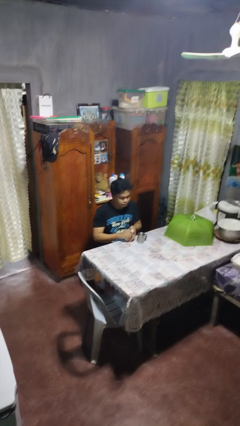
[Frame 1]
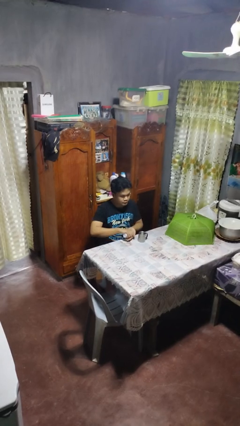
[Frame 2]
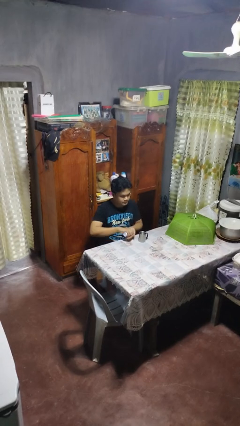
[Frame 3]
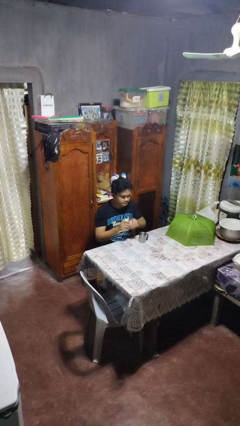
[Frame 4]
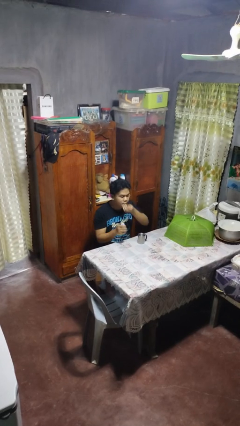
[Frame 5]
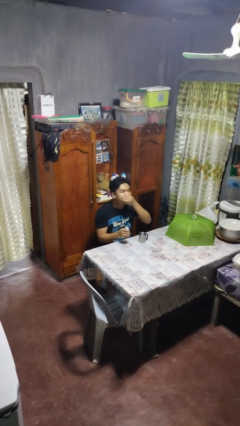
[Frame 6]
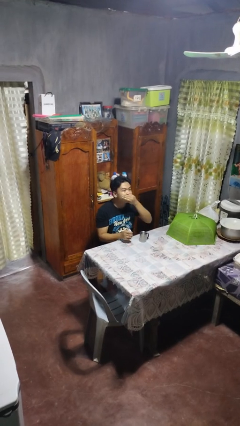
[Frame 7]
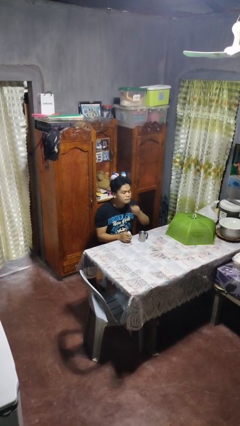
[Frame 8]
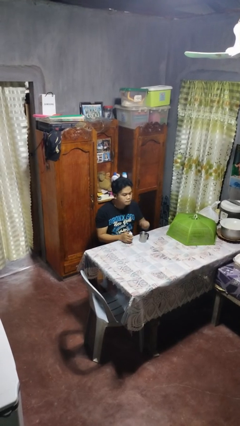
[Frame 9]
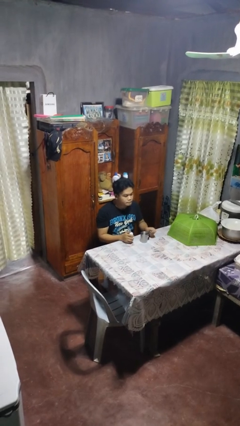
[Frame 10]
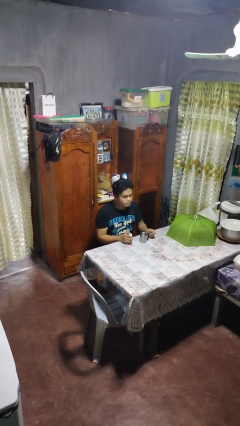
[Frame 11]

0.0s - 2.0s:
person takes medicine pills

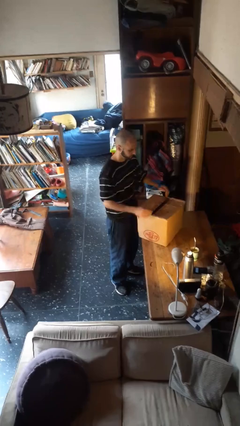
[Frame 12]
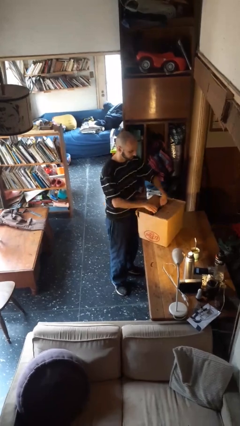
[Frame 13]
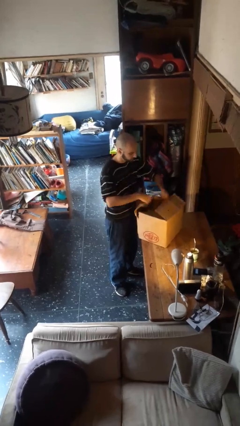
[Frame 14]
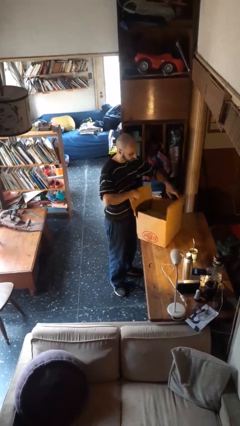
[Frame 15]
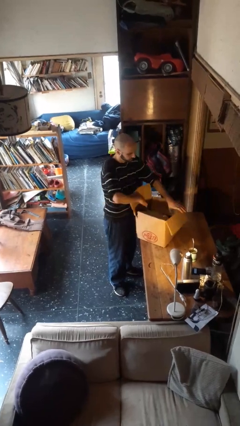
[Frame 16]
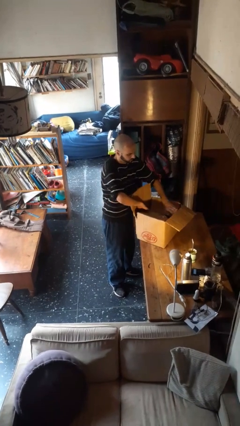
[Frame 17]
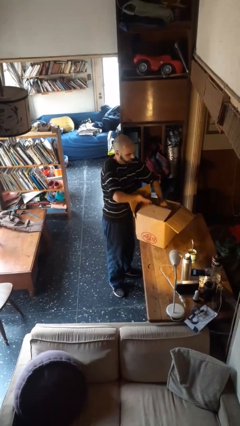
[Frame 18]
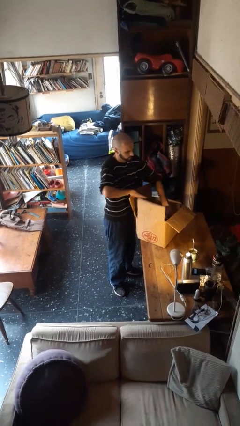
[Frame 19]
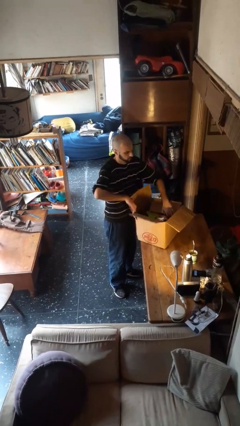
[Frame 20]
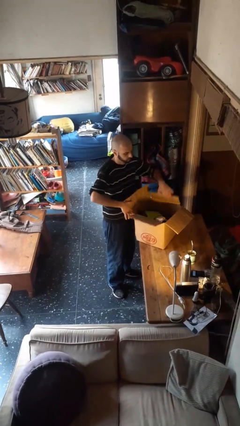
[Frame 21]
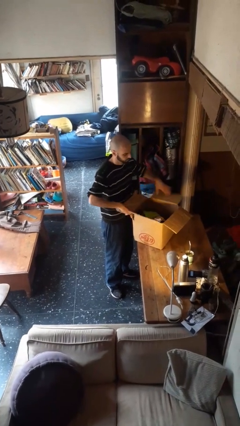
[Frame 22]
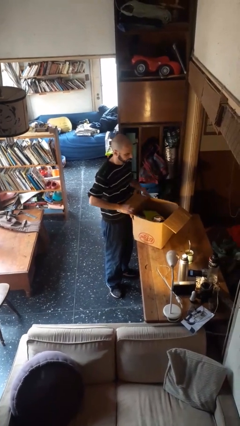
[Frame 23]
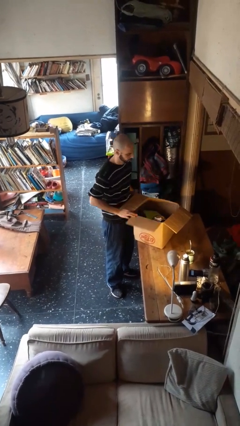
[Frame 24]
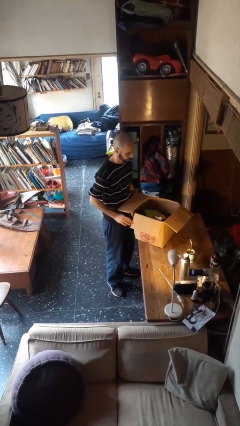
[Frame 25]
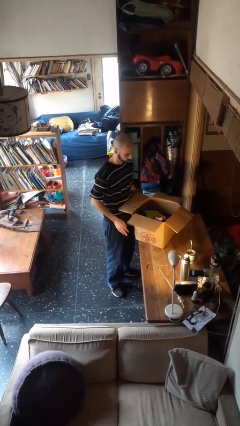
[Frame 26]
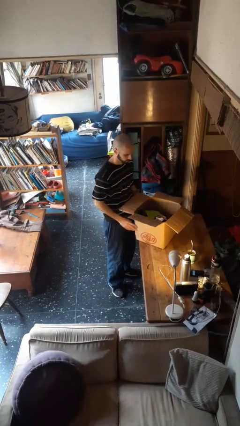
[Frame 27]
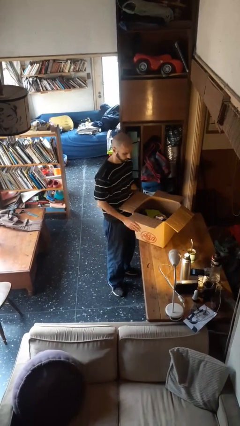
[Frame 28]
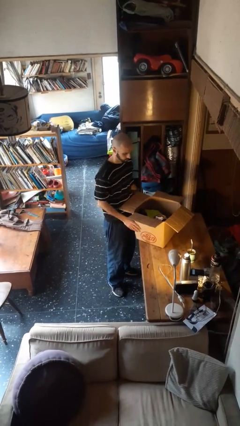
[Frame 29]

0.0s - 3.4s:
person opens box

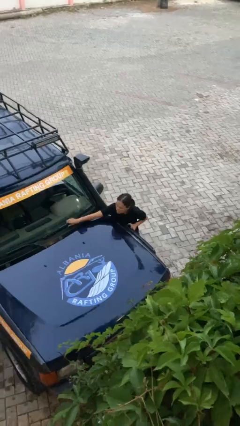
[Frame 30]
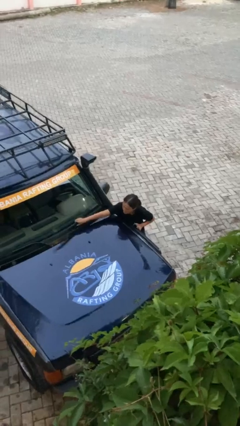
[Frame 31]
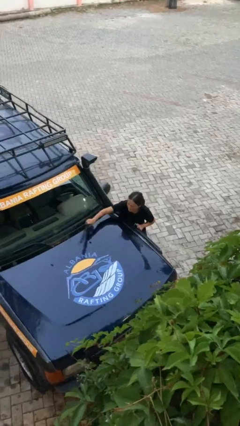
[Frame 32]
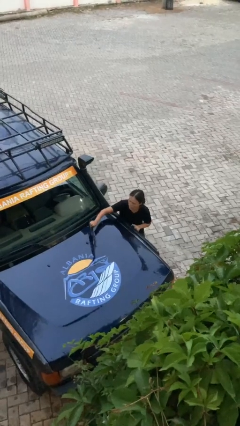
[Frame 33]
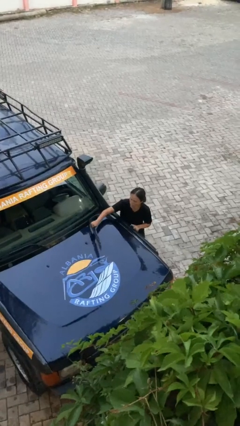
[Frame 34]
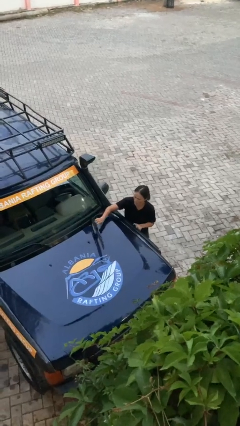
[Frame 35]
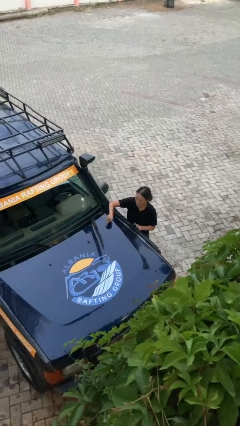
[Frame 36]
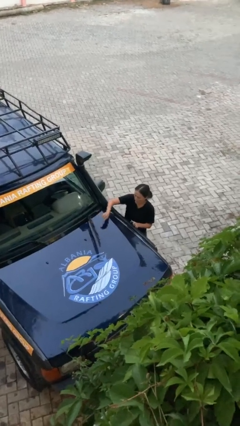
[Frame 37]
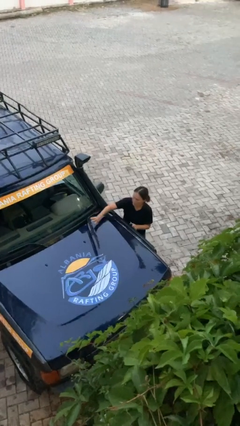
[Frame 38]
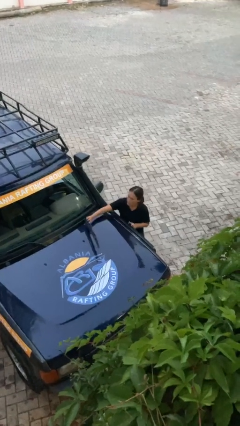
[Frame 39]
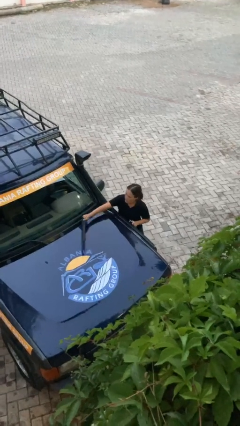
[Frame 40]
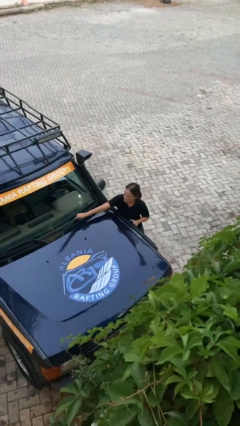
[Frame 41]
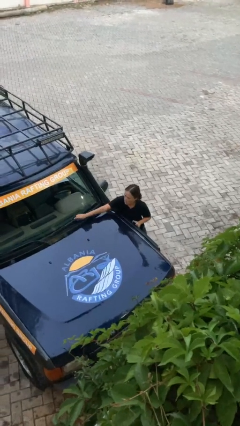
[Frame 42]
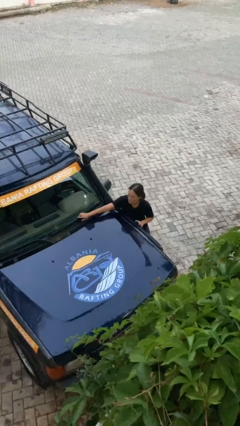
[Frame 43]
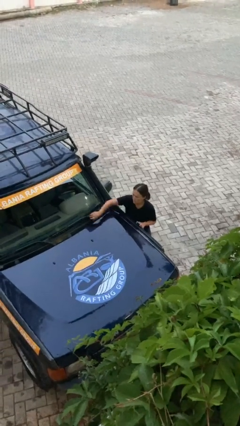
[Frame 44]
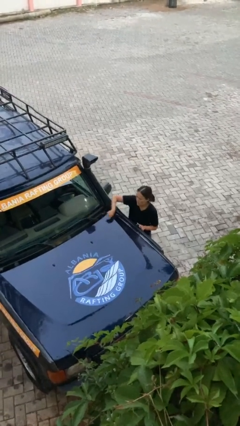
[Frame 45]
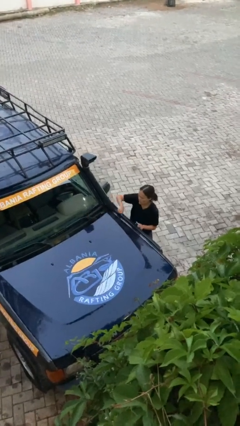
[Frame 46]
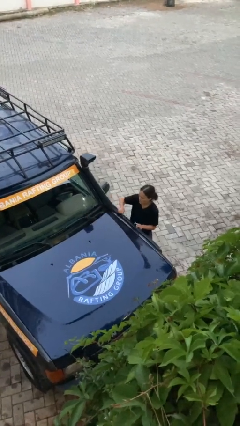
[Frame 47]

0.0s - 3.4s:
person flips up car wipers

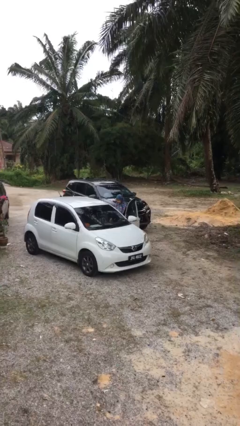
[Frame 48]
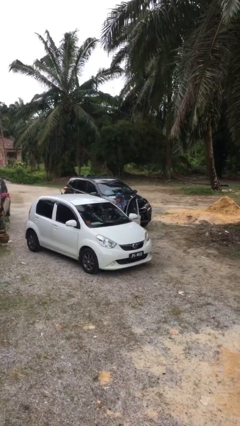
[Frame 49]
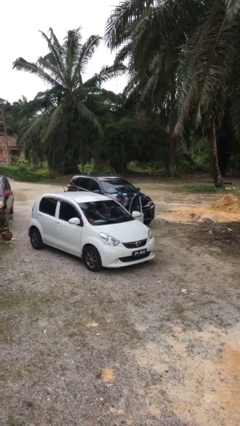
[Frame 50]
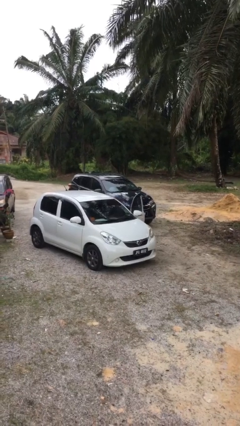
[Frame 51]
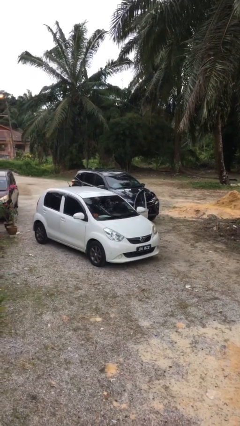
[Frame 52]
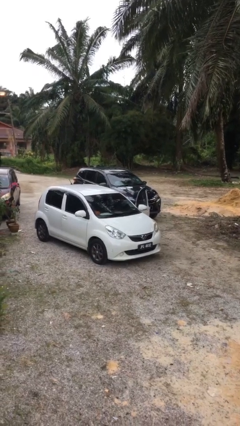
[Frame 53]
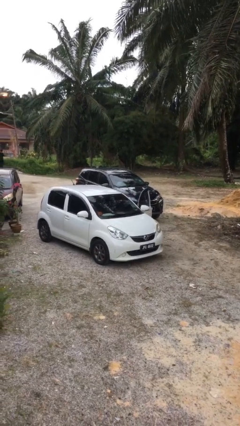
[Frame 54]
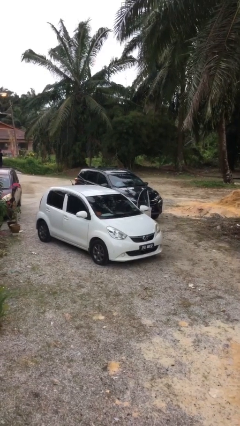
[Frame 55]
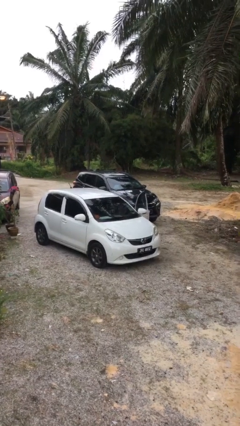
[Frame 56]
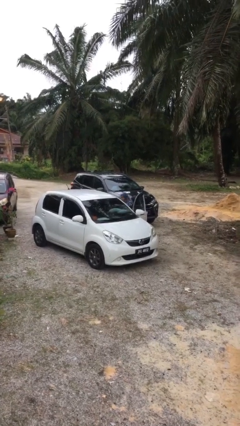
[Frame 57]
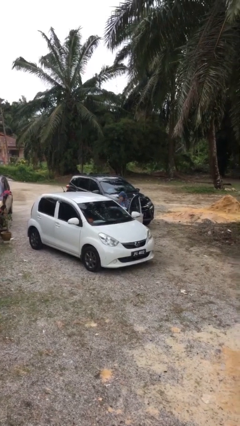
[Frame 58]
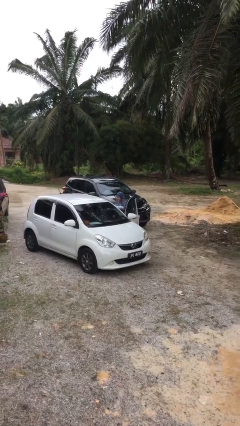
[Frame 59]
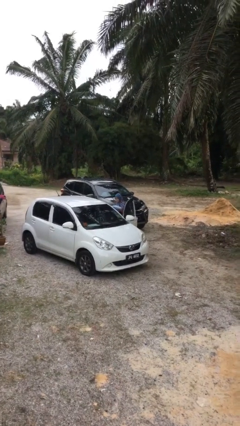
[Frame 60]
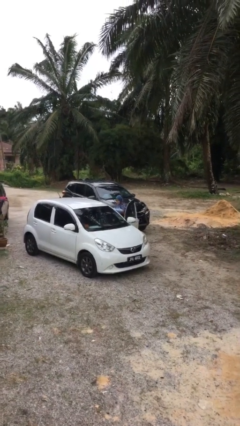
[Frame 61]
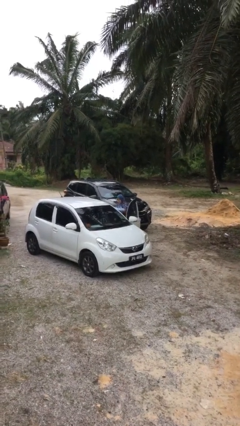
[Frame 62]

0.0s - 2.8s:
person unloads car

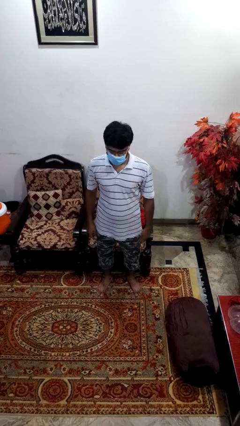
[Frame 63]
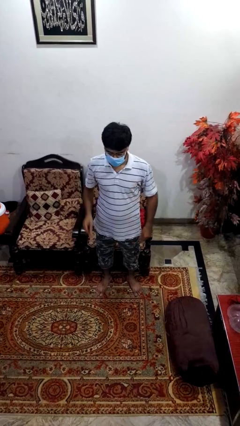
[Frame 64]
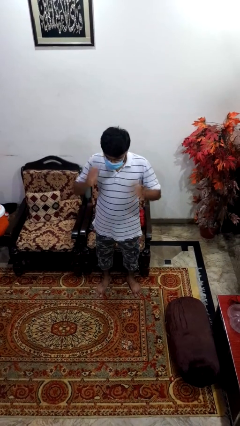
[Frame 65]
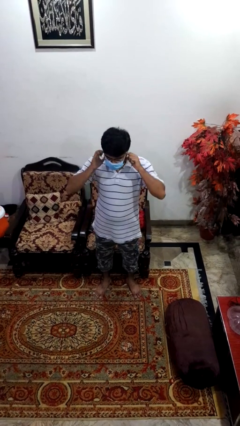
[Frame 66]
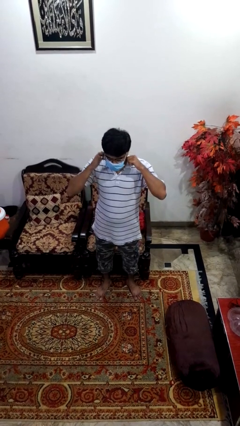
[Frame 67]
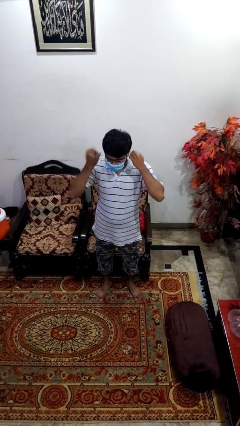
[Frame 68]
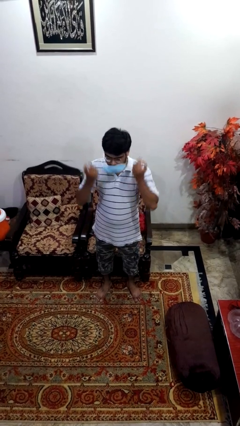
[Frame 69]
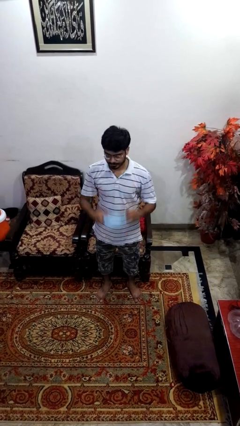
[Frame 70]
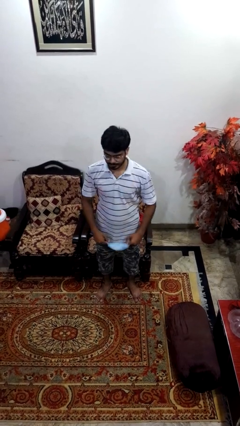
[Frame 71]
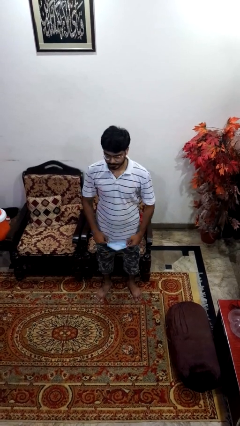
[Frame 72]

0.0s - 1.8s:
person takes off facemask

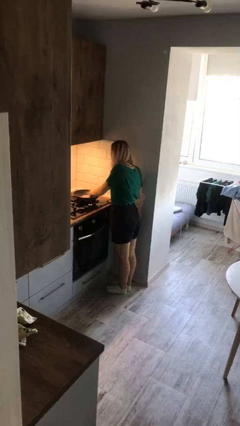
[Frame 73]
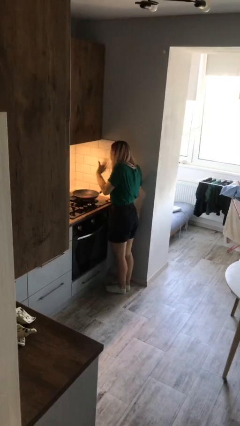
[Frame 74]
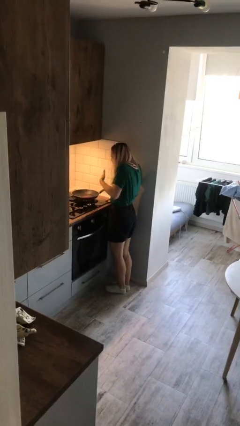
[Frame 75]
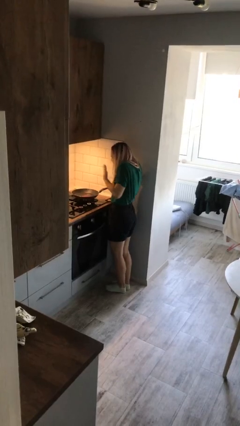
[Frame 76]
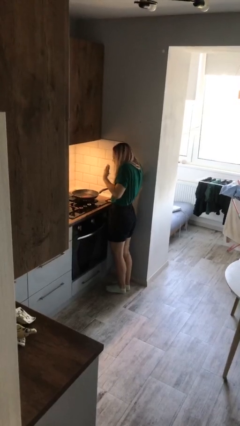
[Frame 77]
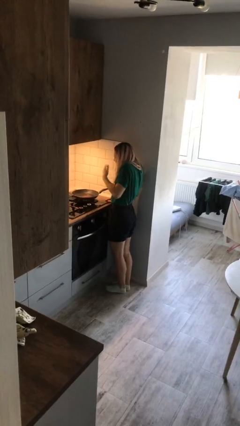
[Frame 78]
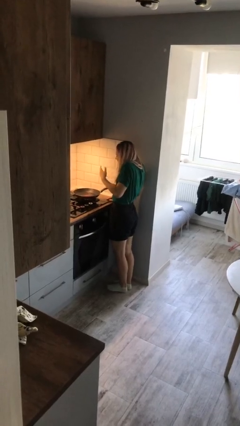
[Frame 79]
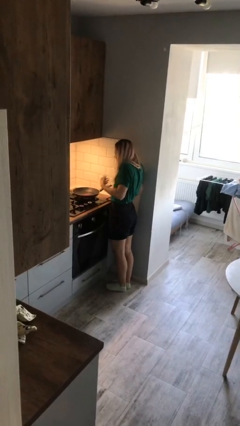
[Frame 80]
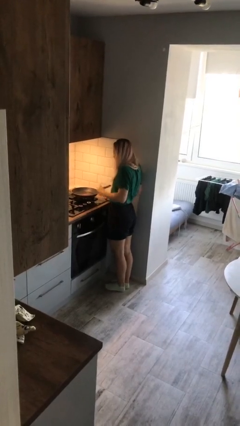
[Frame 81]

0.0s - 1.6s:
person burns hand

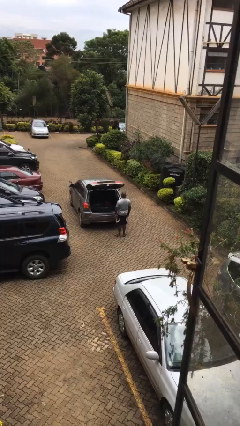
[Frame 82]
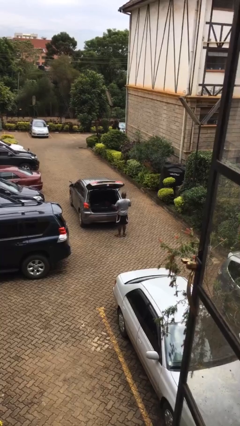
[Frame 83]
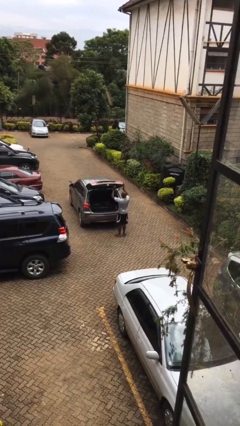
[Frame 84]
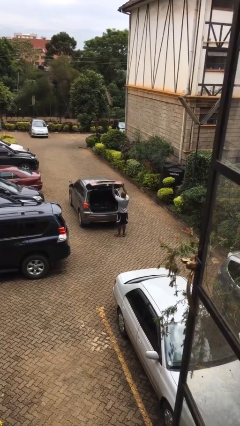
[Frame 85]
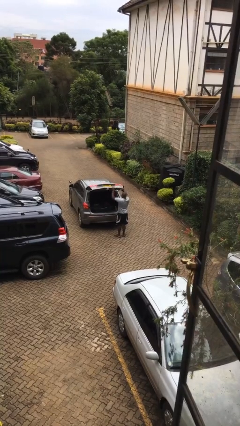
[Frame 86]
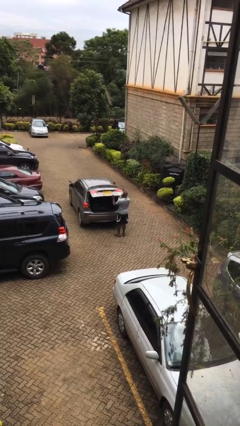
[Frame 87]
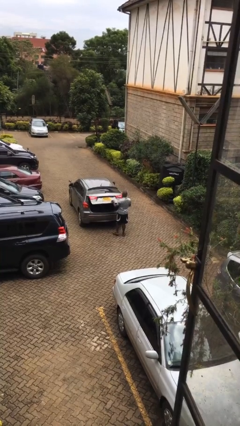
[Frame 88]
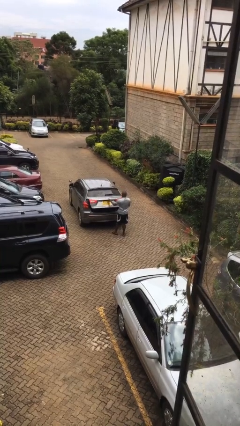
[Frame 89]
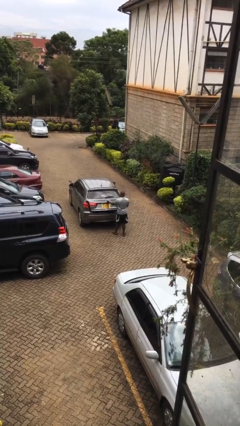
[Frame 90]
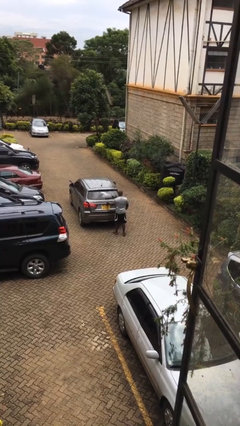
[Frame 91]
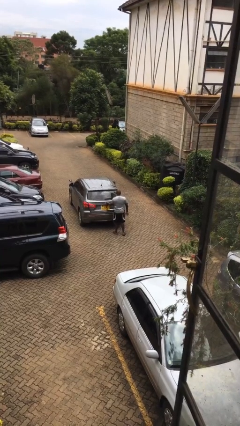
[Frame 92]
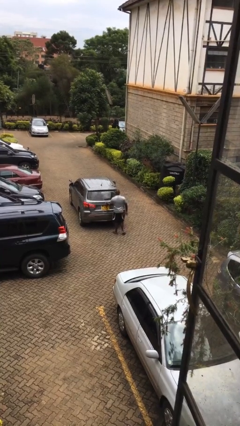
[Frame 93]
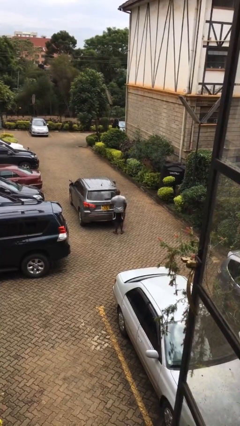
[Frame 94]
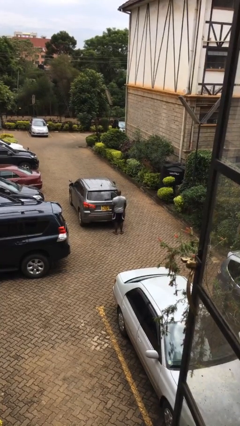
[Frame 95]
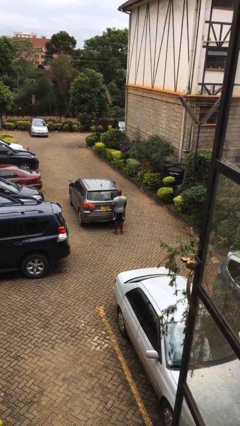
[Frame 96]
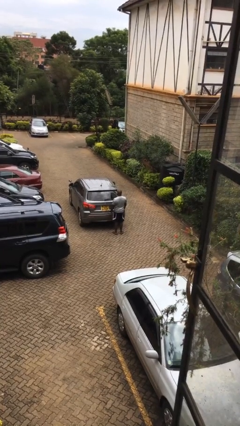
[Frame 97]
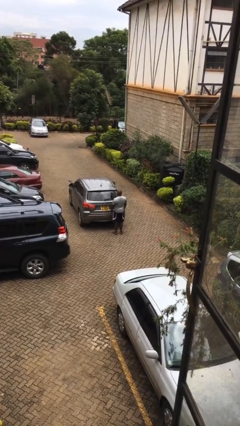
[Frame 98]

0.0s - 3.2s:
person closes car trunk
